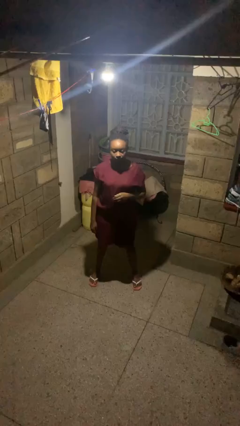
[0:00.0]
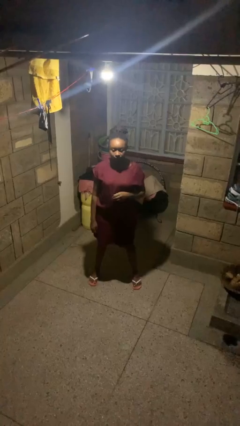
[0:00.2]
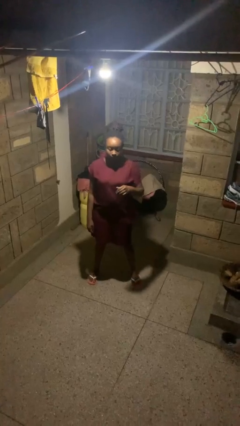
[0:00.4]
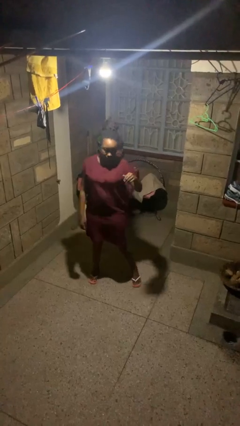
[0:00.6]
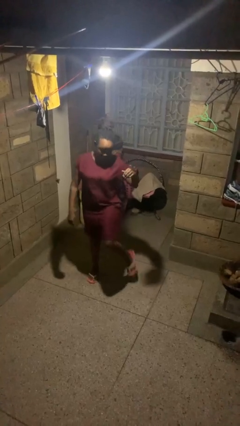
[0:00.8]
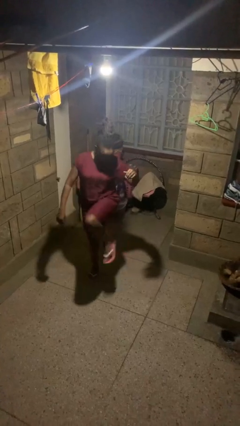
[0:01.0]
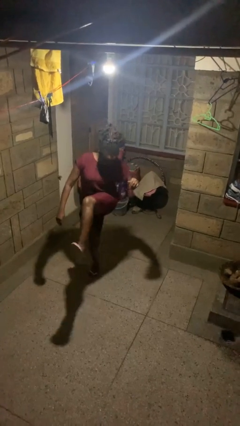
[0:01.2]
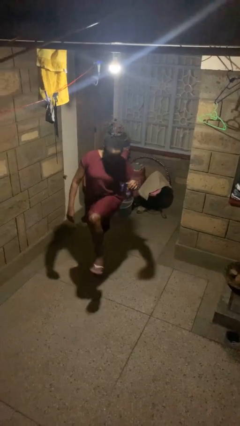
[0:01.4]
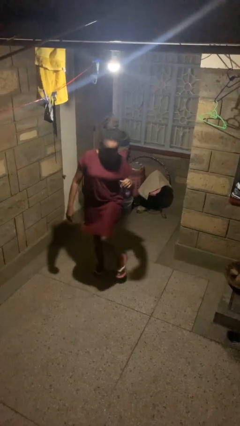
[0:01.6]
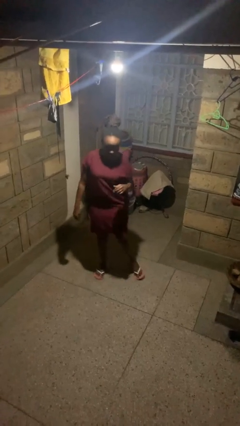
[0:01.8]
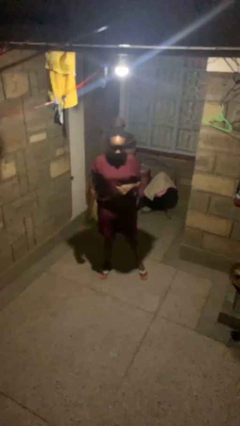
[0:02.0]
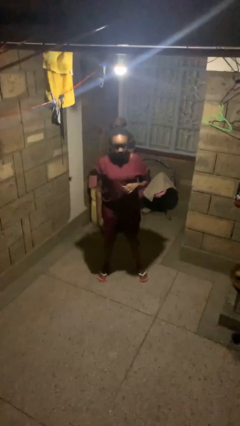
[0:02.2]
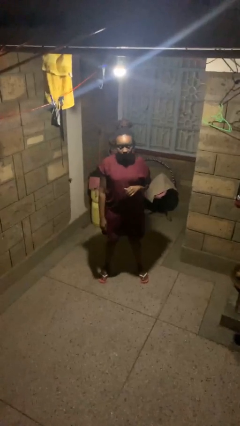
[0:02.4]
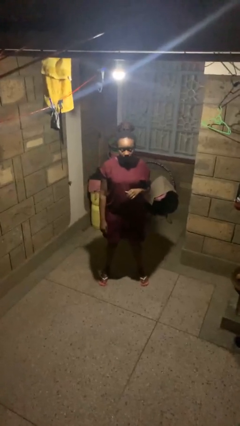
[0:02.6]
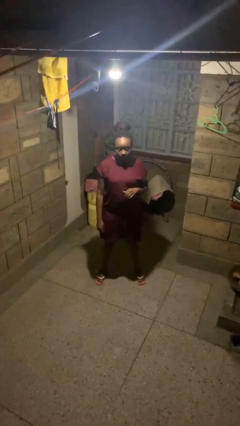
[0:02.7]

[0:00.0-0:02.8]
person karate kicks

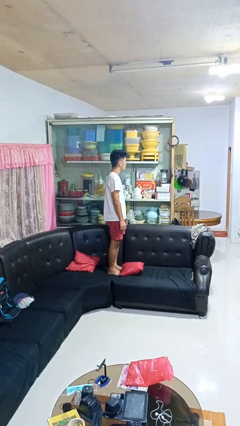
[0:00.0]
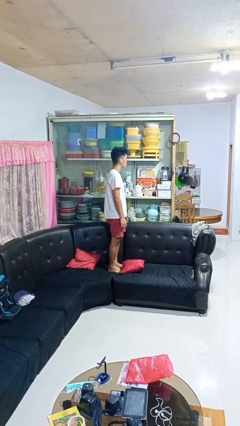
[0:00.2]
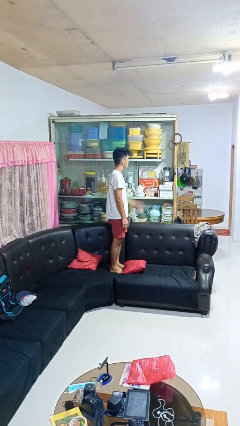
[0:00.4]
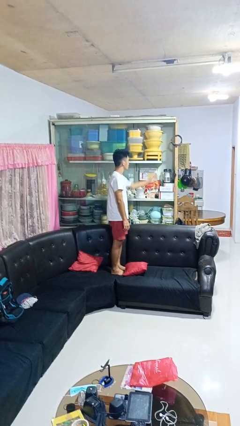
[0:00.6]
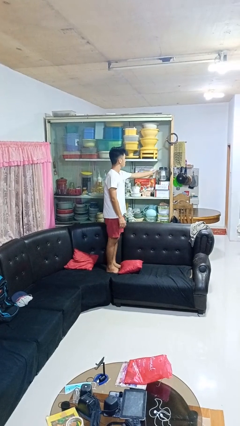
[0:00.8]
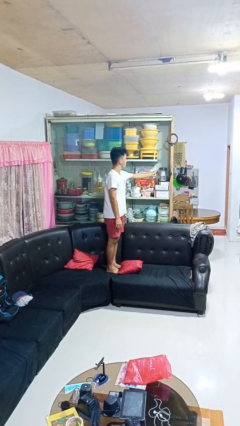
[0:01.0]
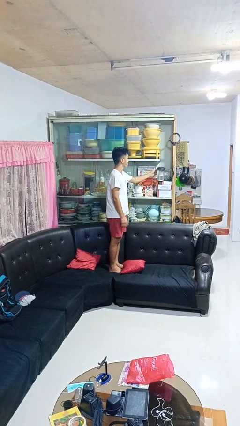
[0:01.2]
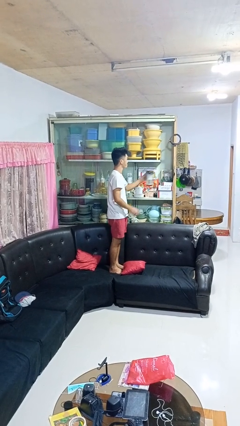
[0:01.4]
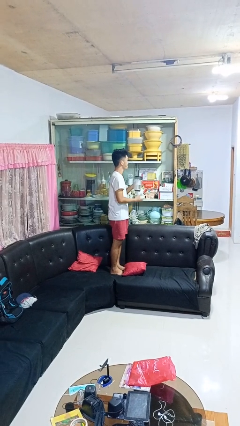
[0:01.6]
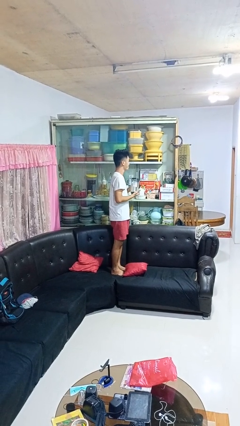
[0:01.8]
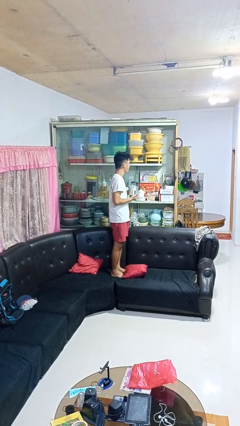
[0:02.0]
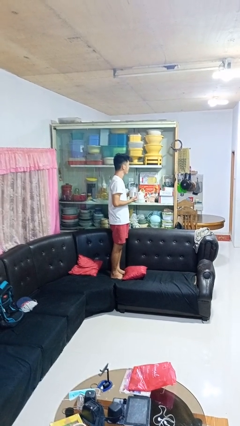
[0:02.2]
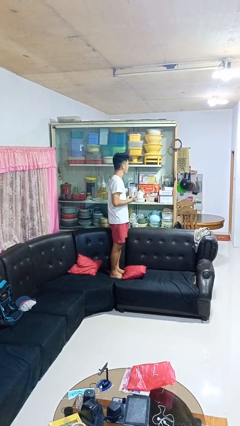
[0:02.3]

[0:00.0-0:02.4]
person picks up object from cabinet

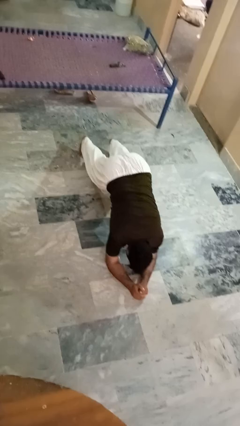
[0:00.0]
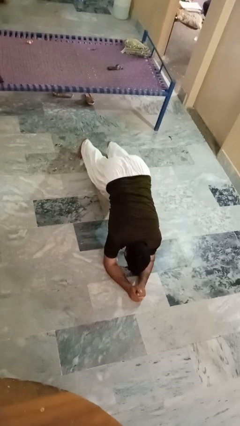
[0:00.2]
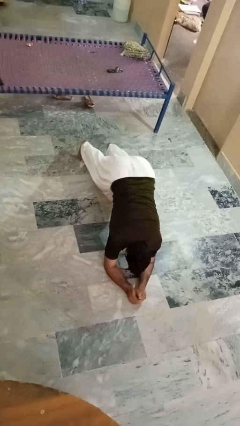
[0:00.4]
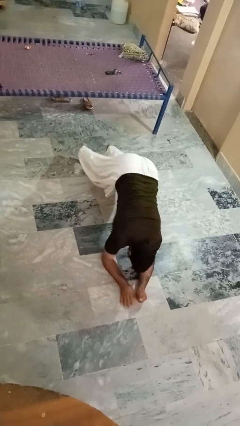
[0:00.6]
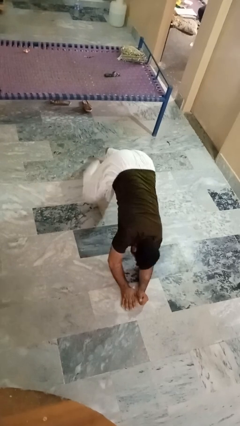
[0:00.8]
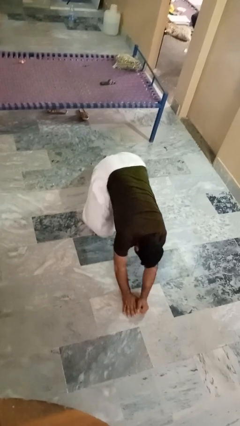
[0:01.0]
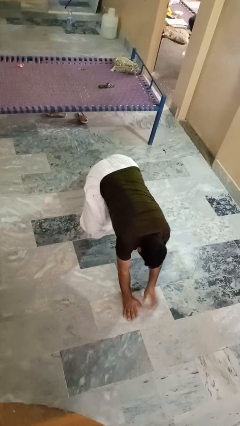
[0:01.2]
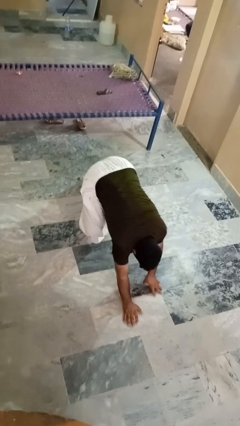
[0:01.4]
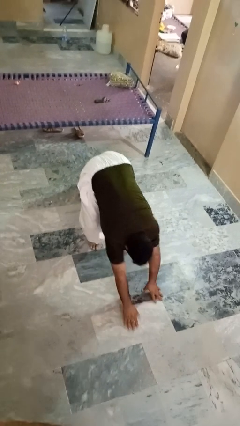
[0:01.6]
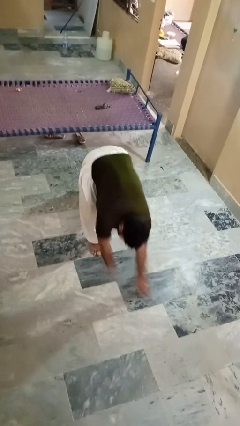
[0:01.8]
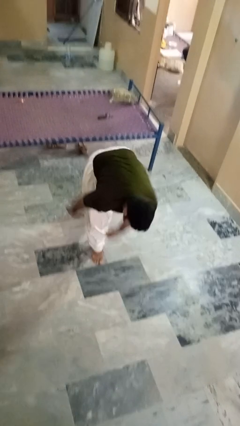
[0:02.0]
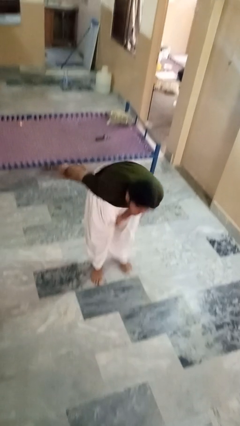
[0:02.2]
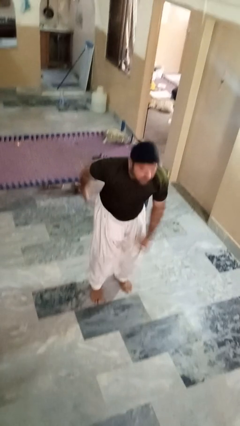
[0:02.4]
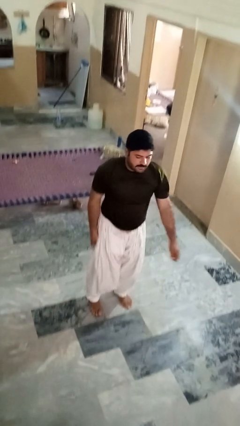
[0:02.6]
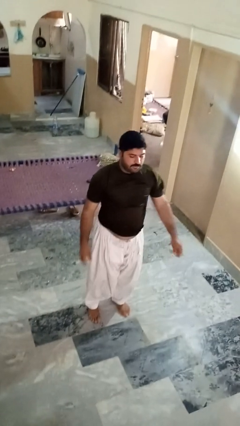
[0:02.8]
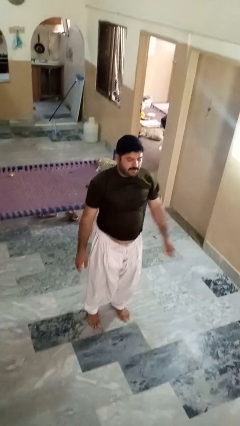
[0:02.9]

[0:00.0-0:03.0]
person stands up from floor

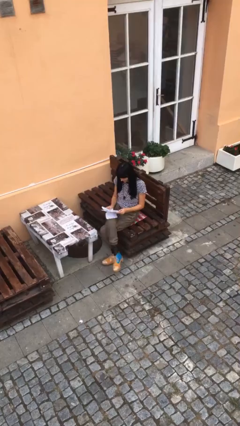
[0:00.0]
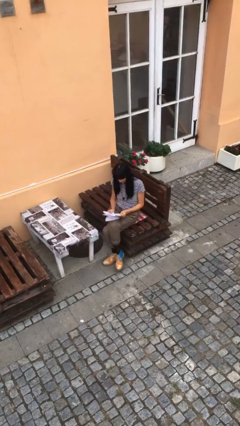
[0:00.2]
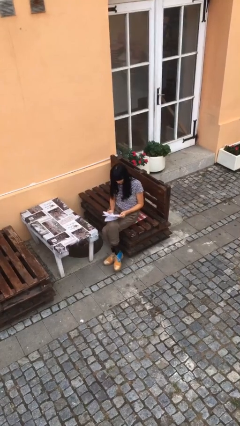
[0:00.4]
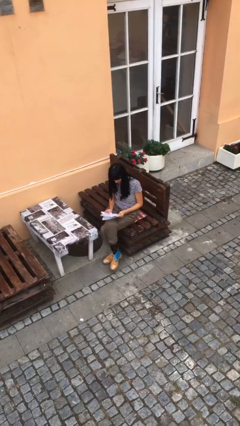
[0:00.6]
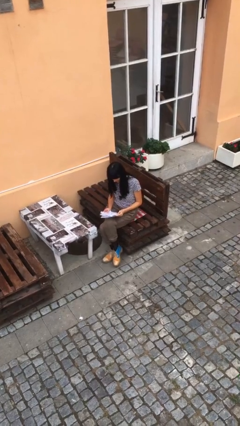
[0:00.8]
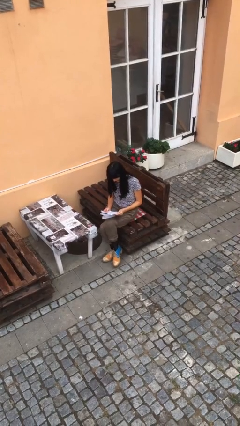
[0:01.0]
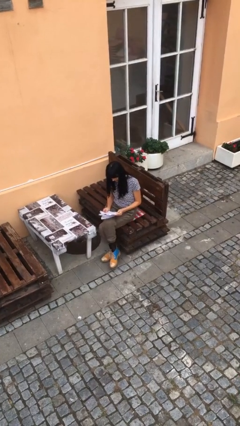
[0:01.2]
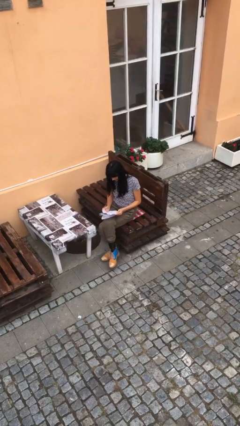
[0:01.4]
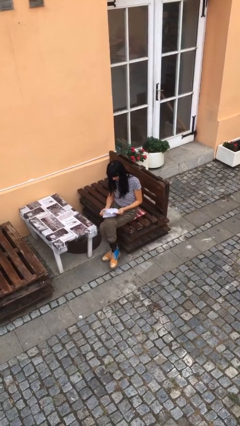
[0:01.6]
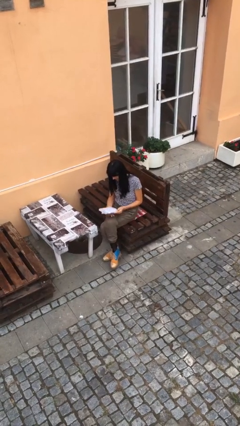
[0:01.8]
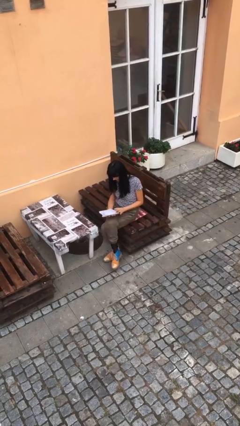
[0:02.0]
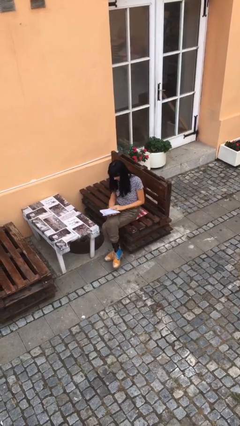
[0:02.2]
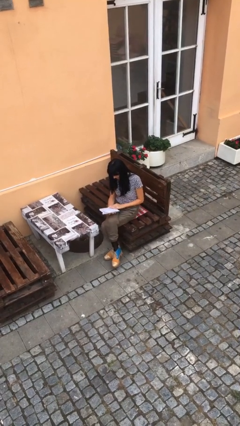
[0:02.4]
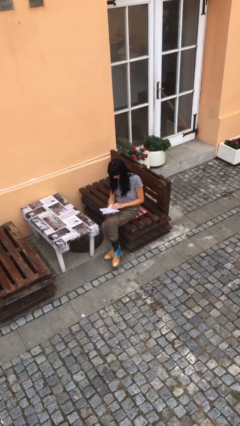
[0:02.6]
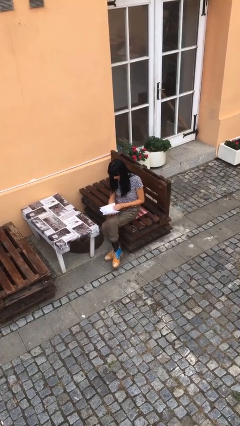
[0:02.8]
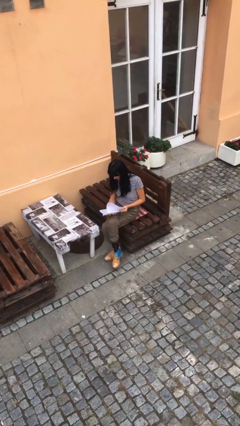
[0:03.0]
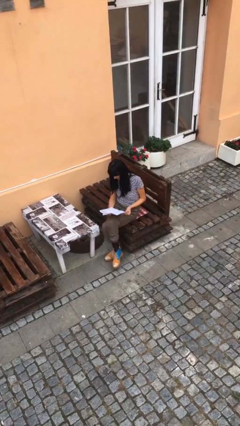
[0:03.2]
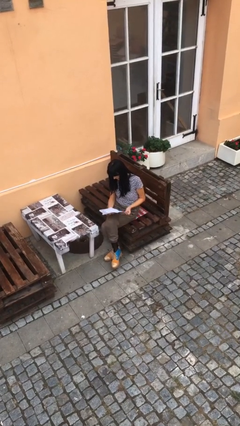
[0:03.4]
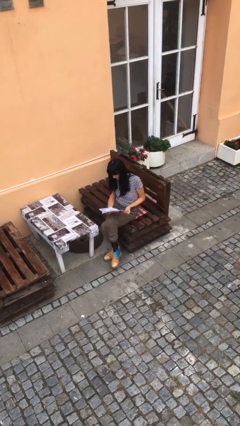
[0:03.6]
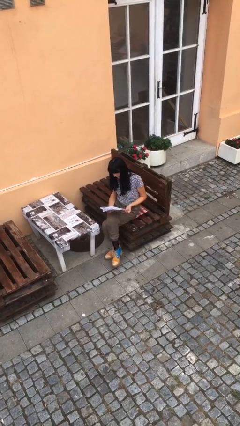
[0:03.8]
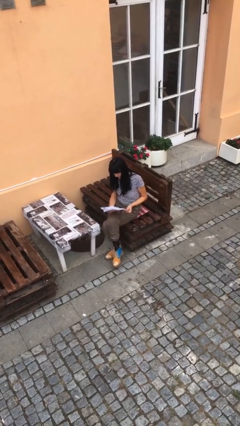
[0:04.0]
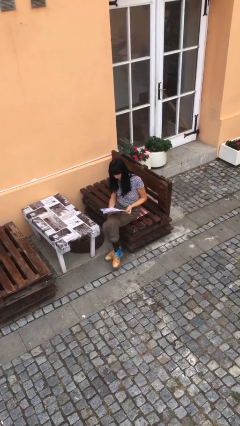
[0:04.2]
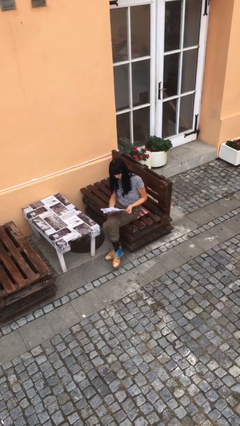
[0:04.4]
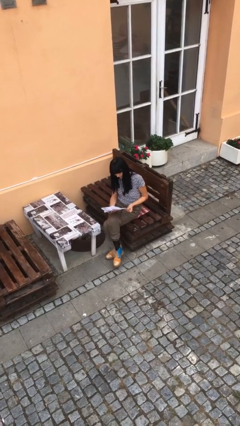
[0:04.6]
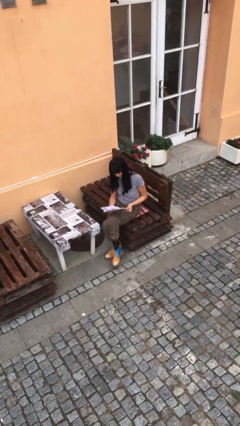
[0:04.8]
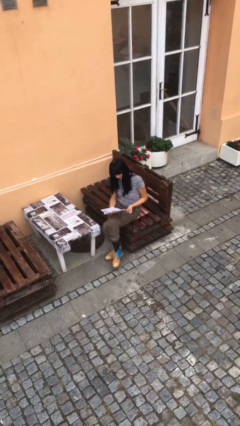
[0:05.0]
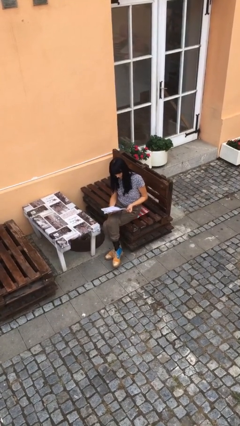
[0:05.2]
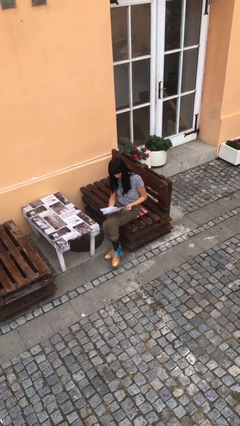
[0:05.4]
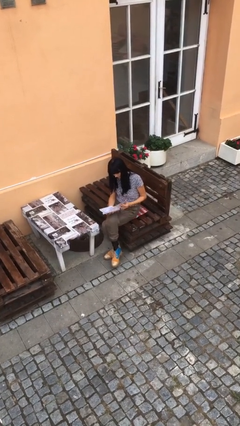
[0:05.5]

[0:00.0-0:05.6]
person reads document

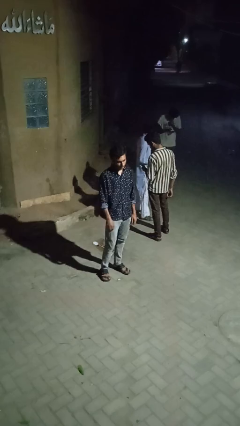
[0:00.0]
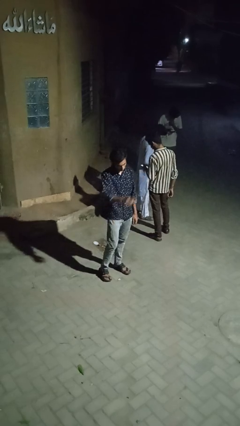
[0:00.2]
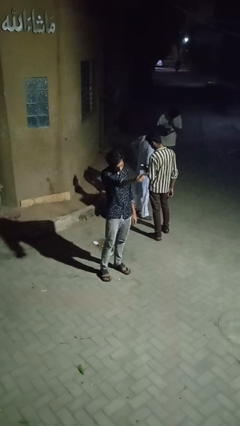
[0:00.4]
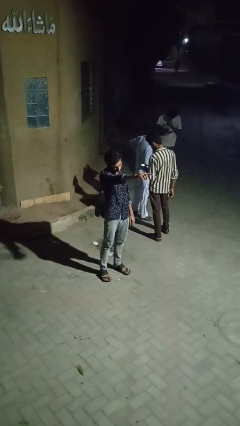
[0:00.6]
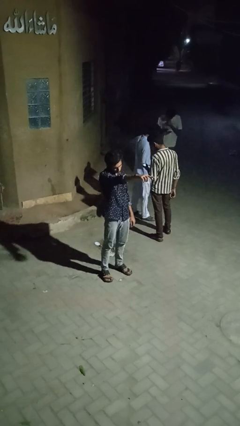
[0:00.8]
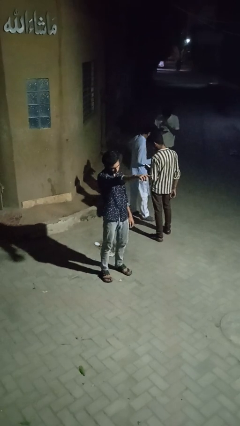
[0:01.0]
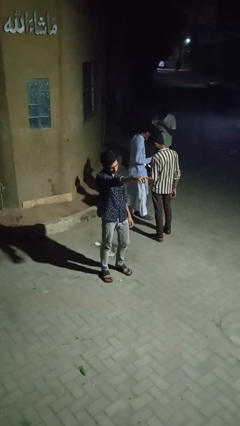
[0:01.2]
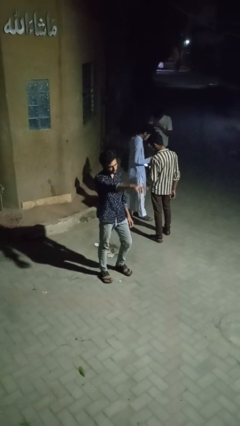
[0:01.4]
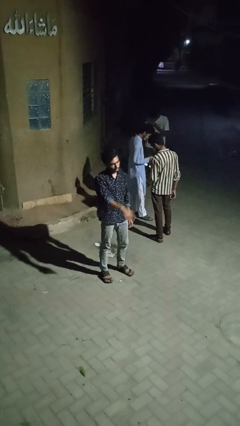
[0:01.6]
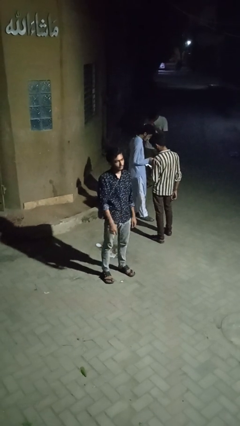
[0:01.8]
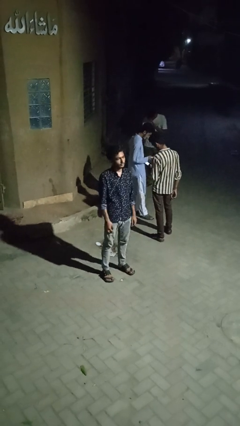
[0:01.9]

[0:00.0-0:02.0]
person points at person

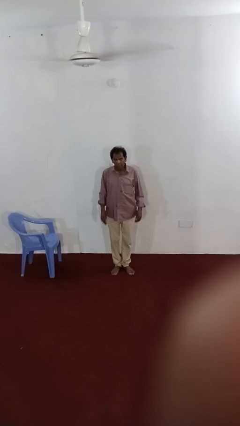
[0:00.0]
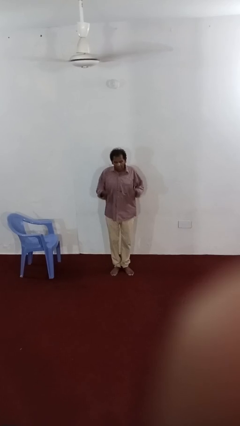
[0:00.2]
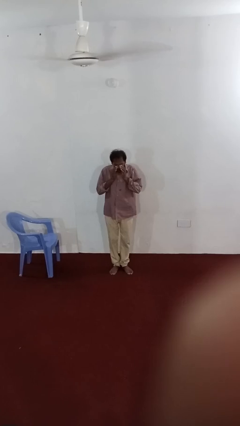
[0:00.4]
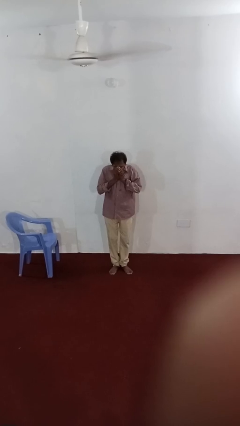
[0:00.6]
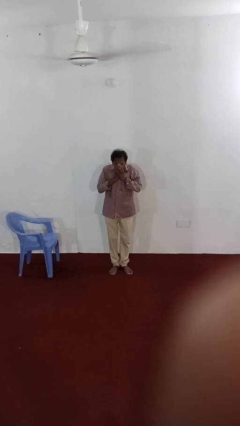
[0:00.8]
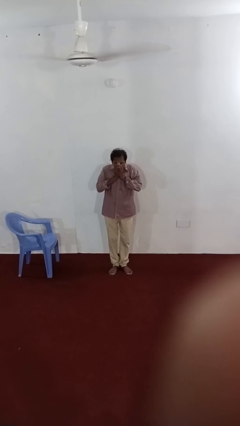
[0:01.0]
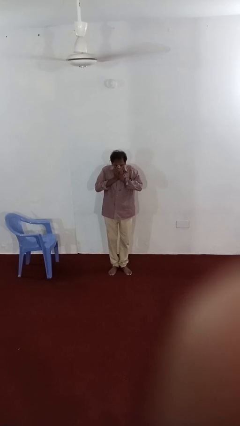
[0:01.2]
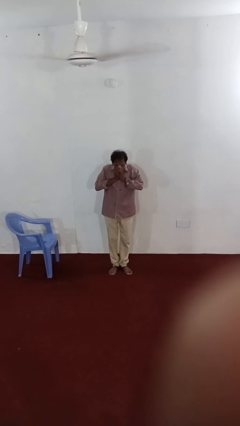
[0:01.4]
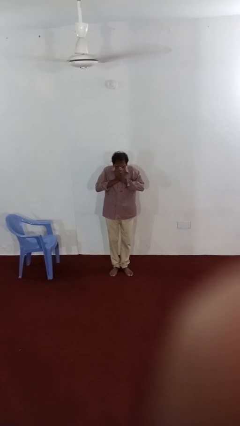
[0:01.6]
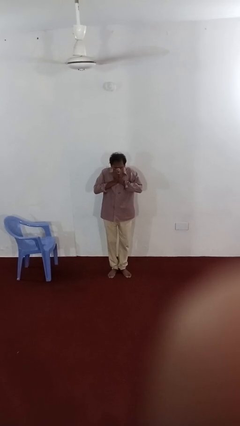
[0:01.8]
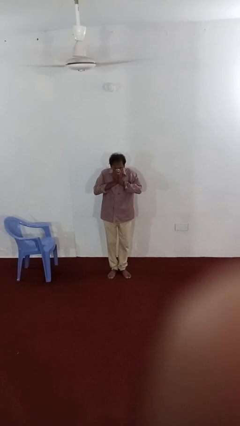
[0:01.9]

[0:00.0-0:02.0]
person sneezes into hand
